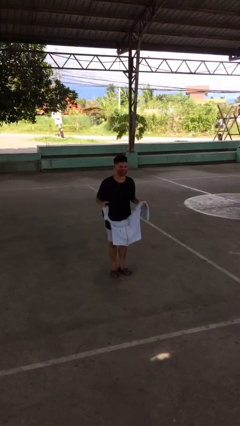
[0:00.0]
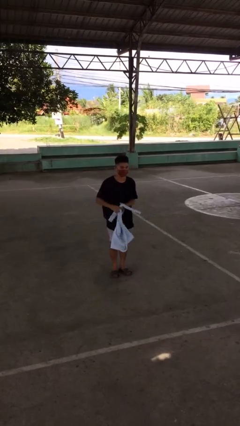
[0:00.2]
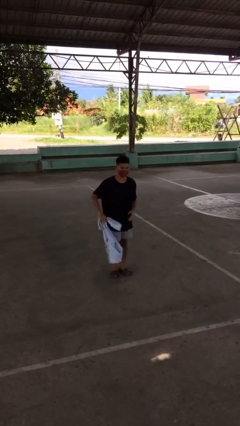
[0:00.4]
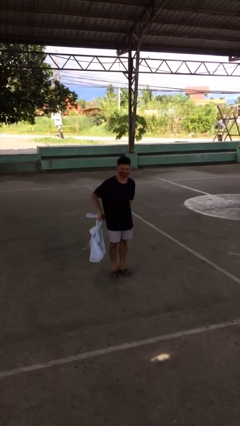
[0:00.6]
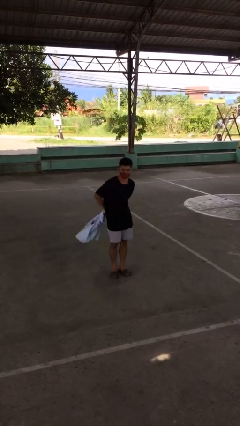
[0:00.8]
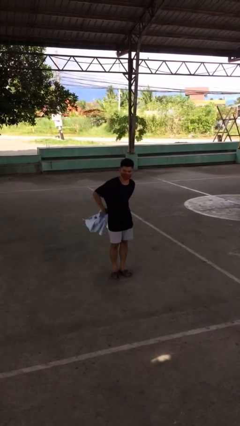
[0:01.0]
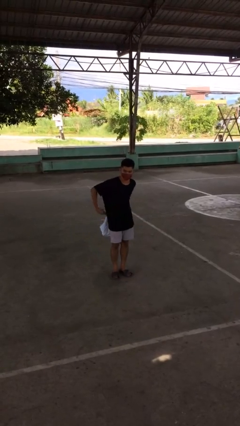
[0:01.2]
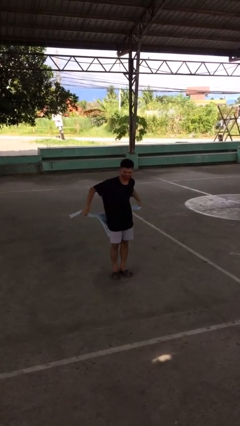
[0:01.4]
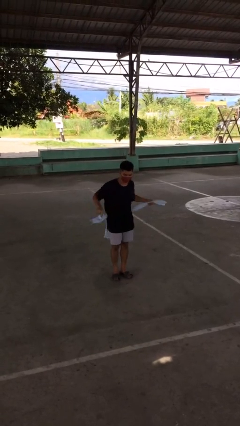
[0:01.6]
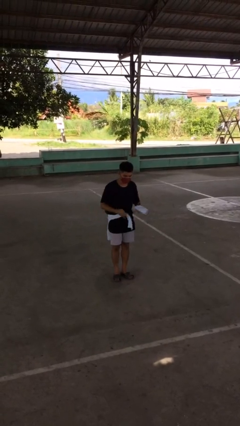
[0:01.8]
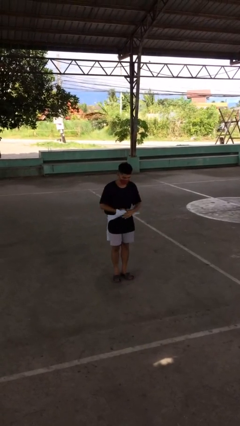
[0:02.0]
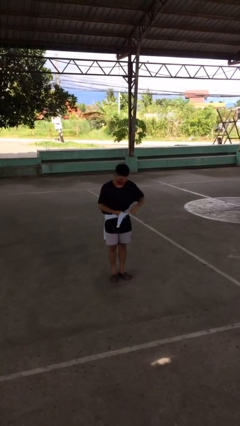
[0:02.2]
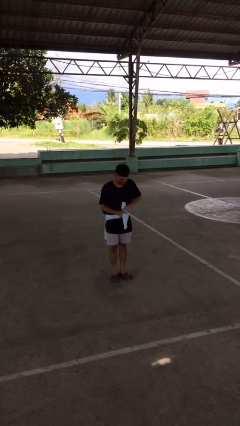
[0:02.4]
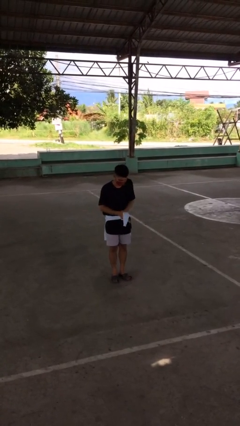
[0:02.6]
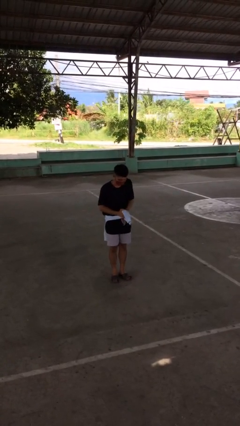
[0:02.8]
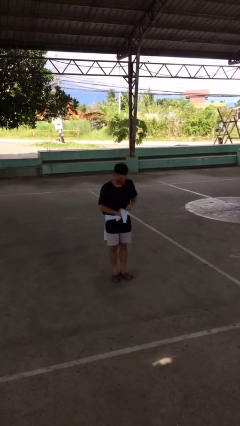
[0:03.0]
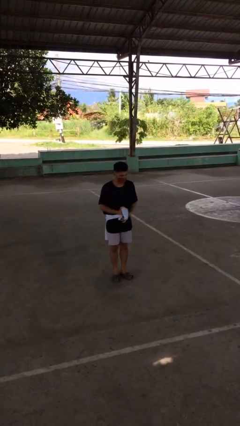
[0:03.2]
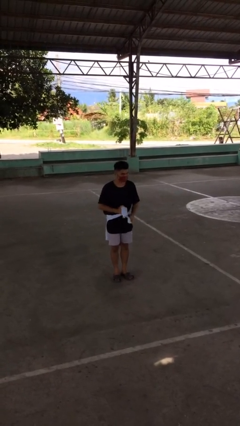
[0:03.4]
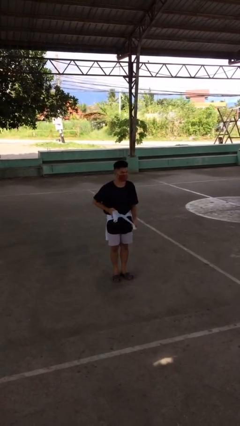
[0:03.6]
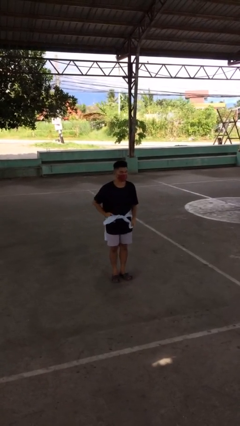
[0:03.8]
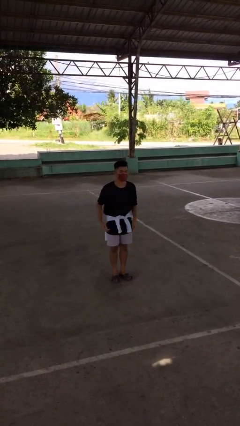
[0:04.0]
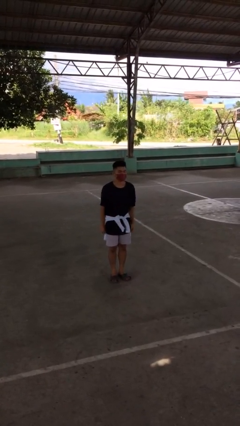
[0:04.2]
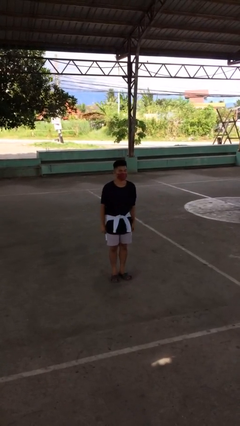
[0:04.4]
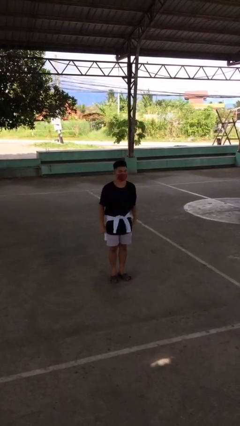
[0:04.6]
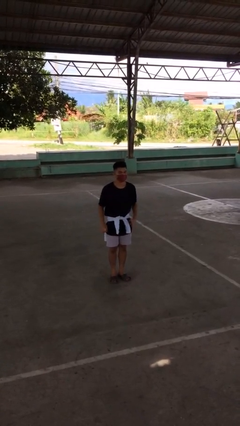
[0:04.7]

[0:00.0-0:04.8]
person ties jacket around waist

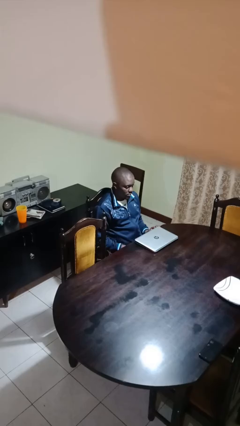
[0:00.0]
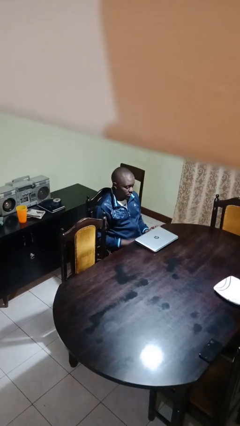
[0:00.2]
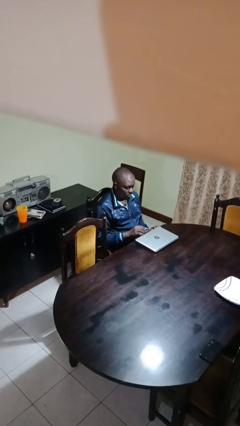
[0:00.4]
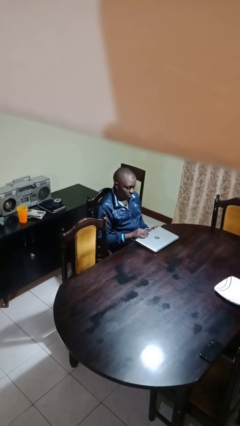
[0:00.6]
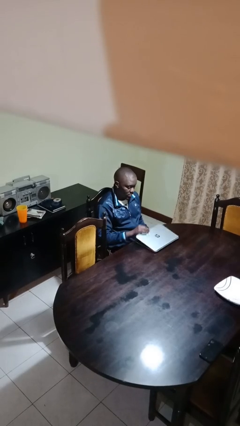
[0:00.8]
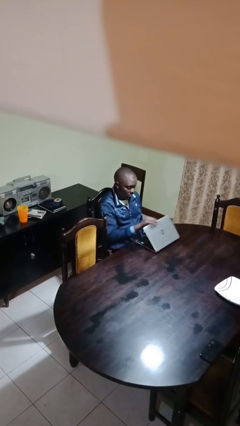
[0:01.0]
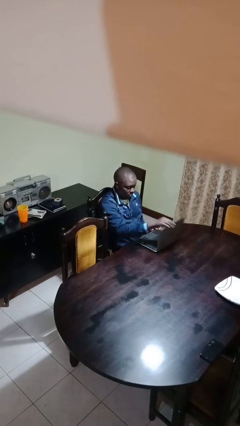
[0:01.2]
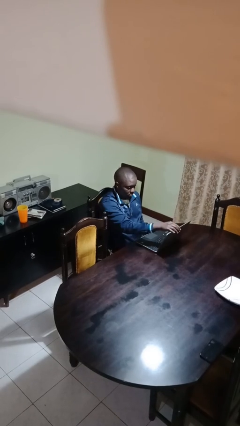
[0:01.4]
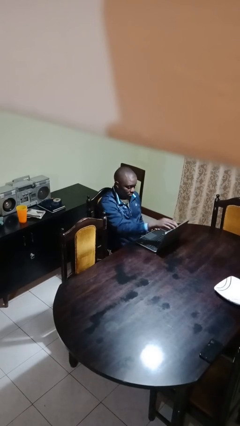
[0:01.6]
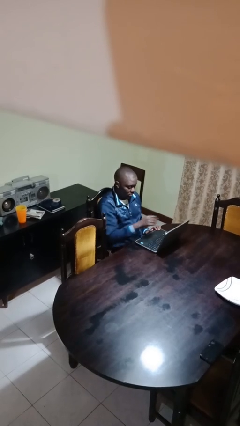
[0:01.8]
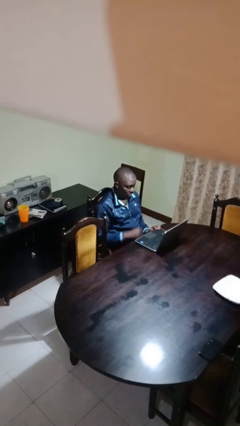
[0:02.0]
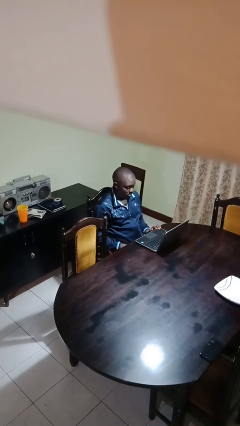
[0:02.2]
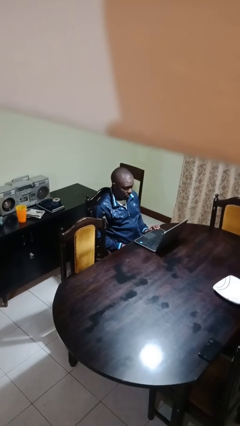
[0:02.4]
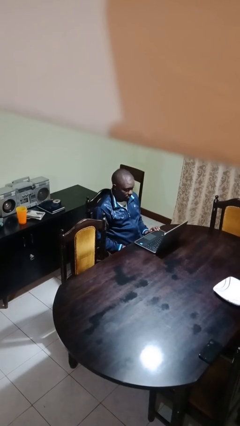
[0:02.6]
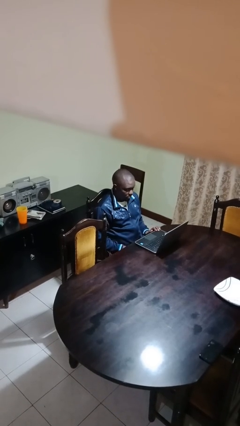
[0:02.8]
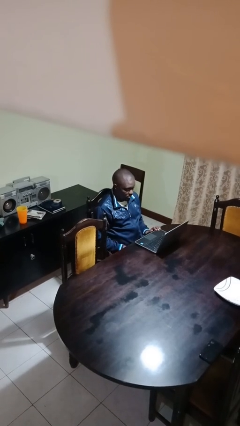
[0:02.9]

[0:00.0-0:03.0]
person opens laptop

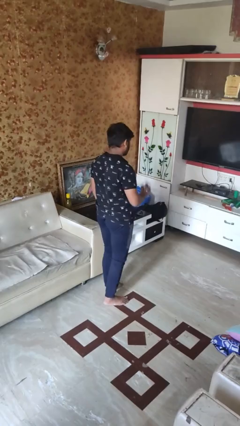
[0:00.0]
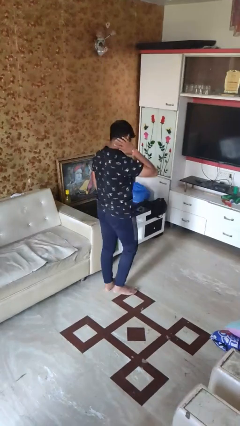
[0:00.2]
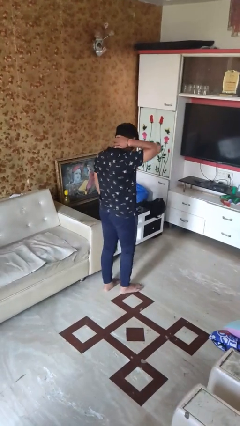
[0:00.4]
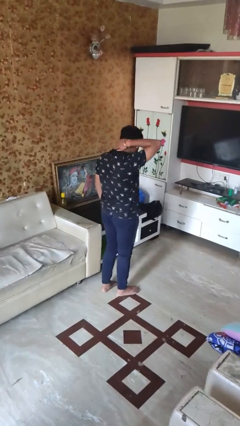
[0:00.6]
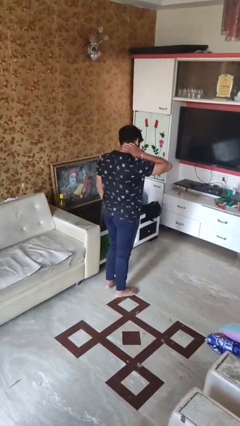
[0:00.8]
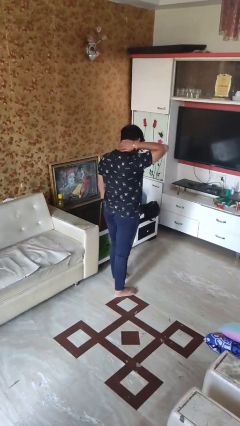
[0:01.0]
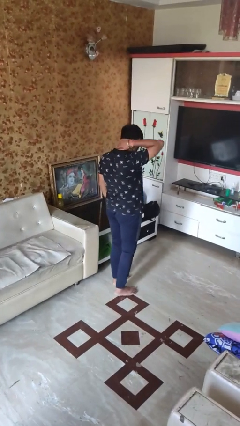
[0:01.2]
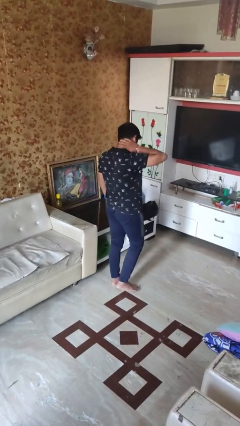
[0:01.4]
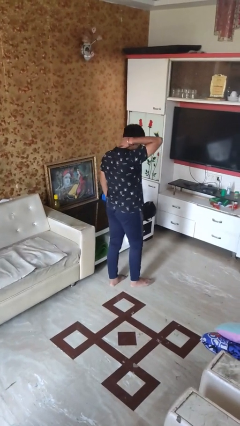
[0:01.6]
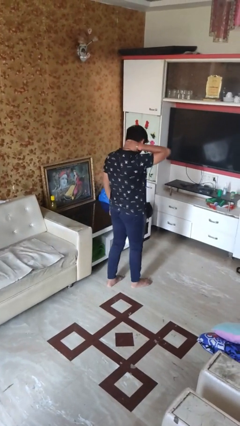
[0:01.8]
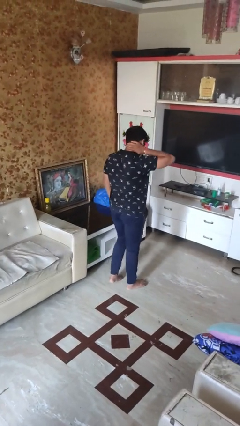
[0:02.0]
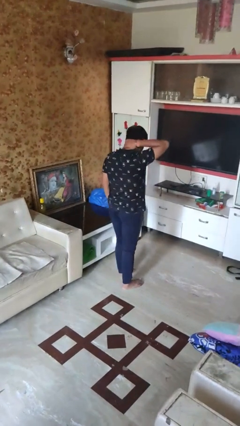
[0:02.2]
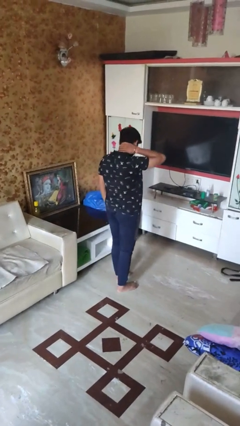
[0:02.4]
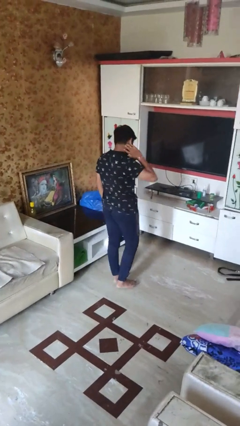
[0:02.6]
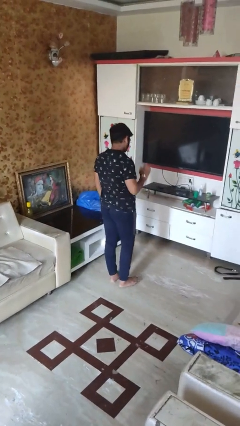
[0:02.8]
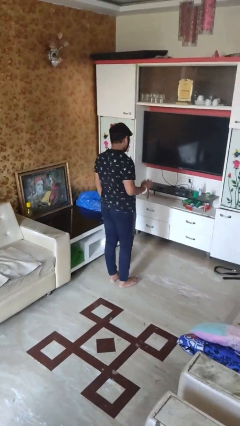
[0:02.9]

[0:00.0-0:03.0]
person rubs neck

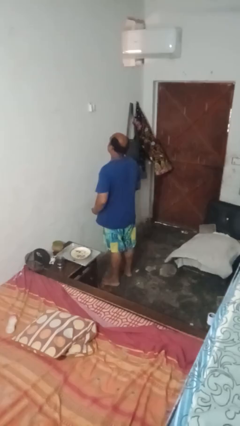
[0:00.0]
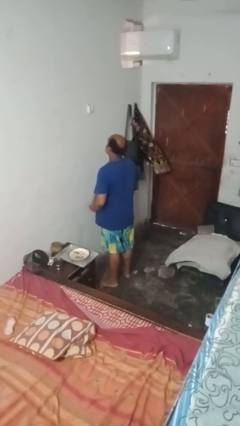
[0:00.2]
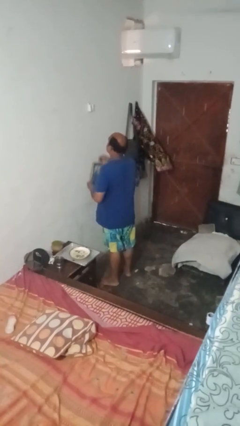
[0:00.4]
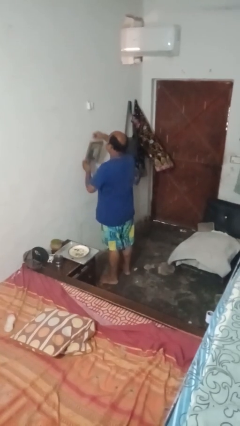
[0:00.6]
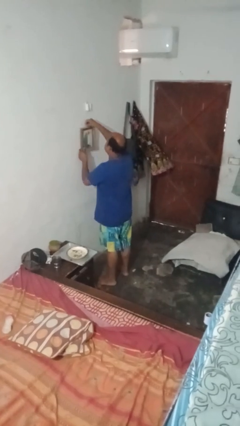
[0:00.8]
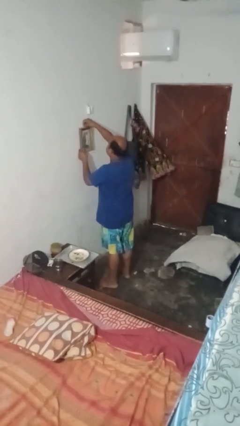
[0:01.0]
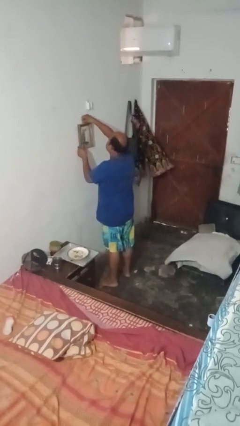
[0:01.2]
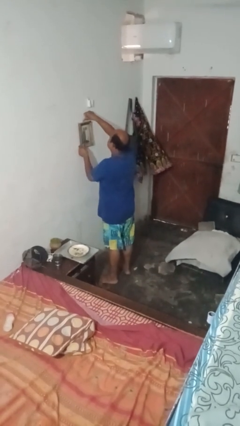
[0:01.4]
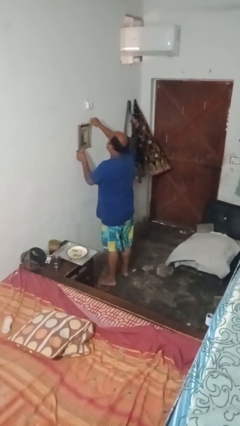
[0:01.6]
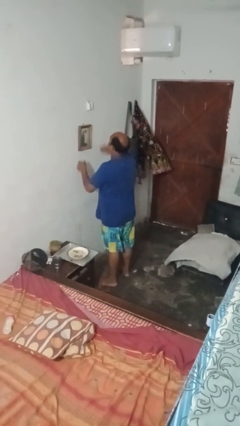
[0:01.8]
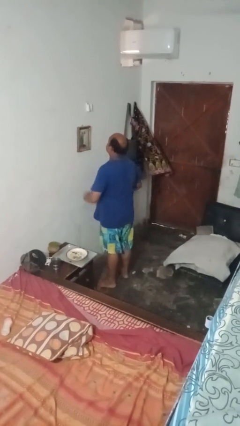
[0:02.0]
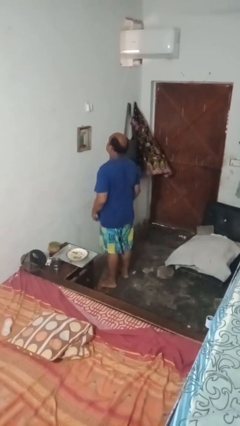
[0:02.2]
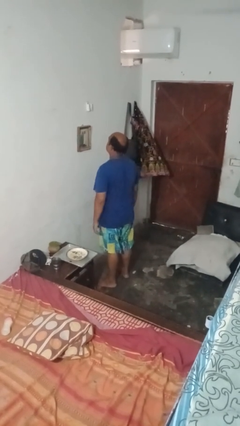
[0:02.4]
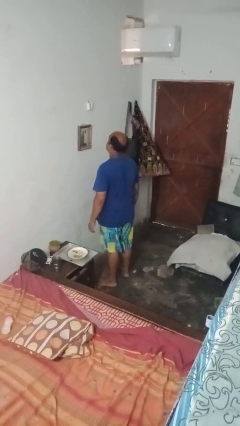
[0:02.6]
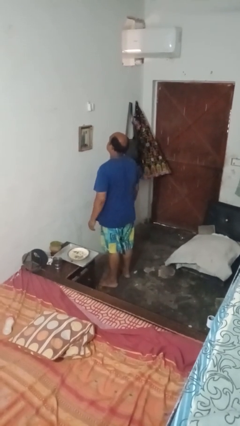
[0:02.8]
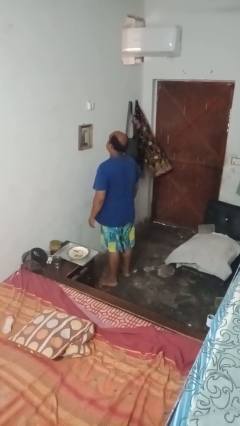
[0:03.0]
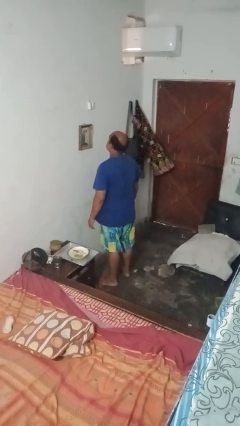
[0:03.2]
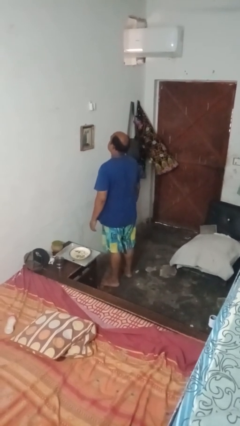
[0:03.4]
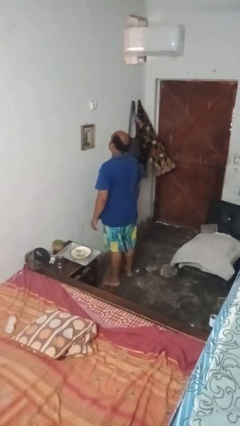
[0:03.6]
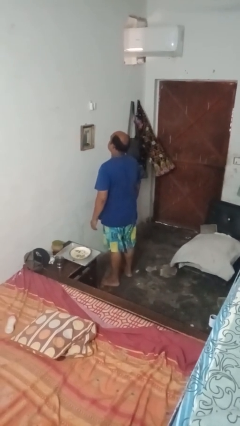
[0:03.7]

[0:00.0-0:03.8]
person puts up picture frame

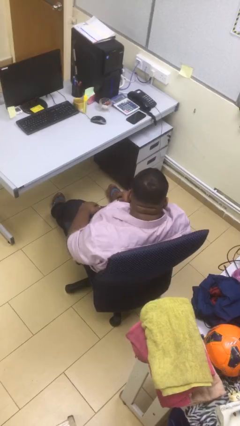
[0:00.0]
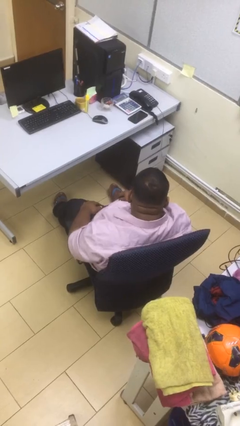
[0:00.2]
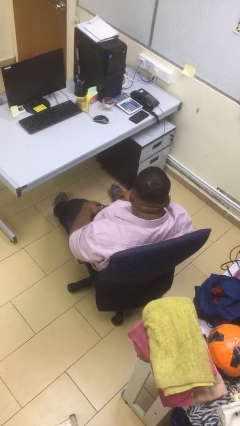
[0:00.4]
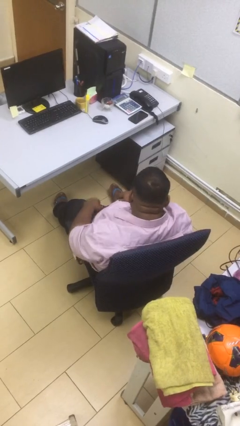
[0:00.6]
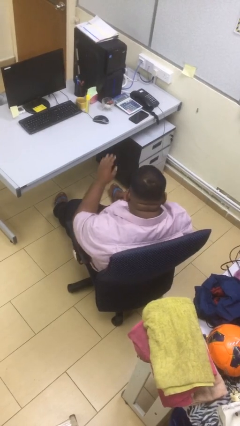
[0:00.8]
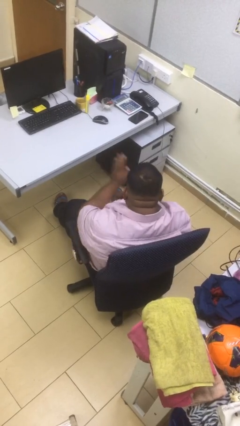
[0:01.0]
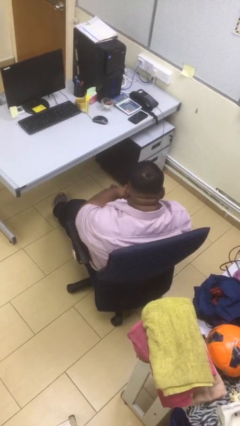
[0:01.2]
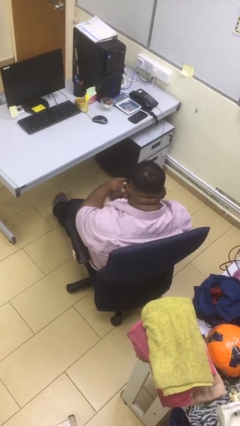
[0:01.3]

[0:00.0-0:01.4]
person swats bug

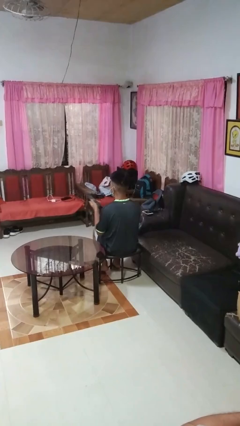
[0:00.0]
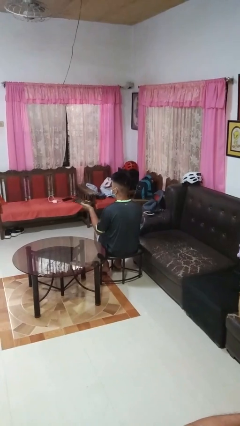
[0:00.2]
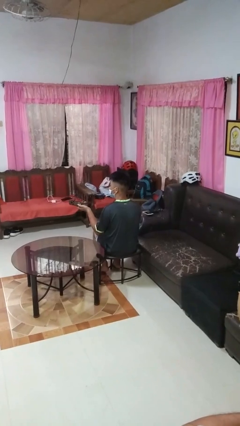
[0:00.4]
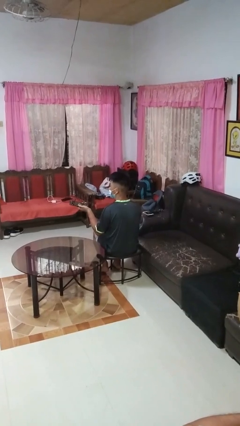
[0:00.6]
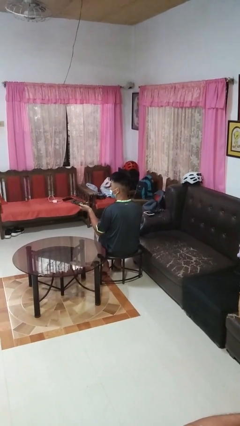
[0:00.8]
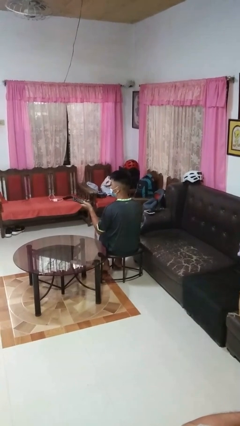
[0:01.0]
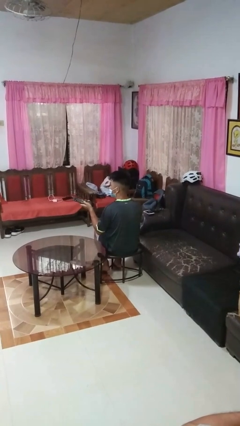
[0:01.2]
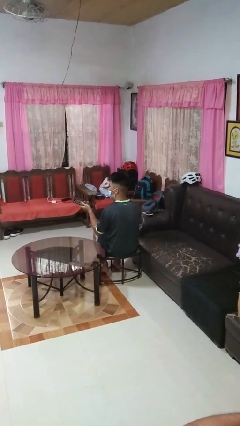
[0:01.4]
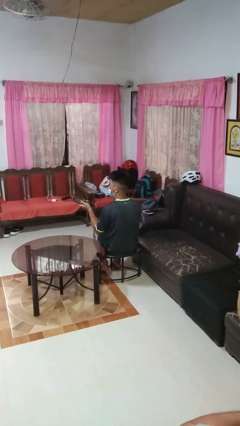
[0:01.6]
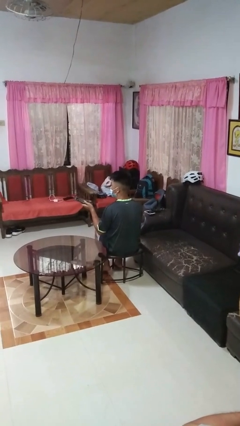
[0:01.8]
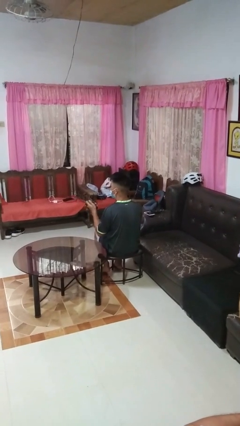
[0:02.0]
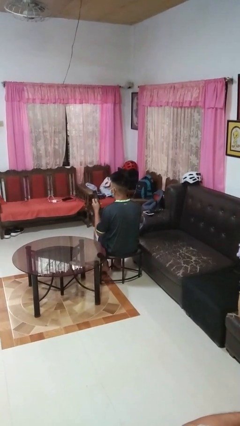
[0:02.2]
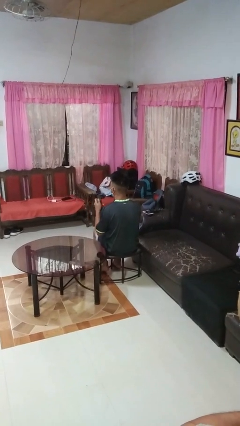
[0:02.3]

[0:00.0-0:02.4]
person uses television remote
